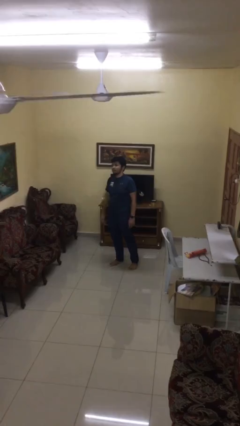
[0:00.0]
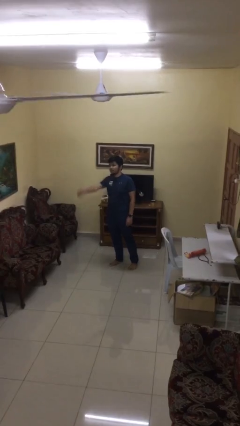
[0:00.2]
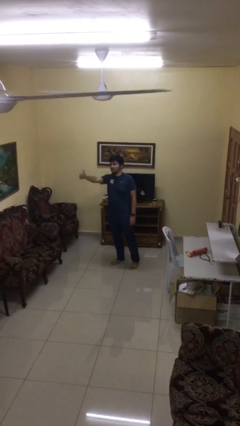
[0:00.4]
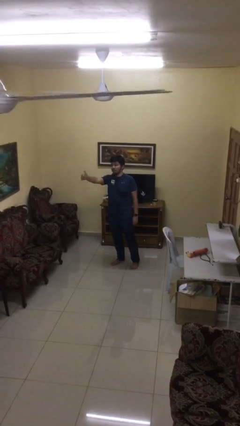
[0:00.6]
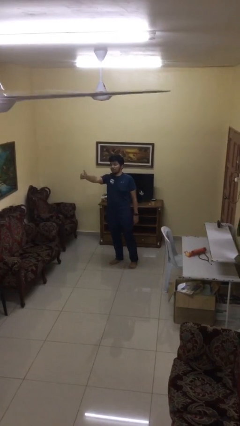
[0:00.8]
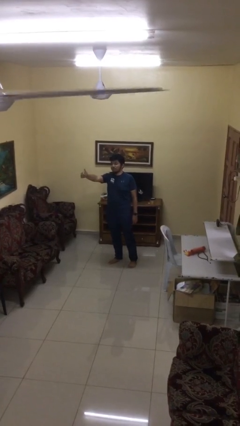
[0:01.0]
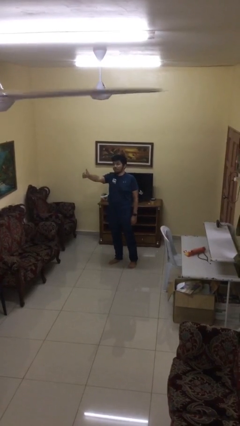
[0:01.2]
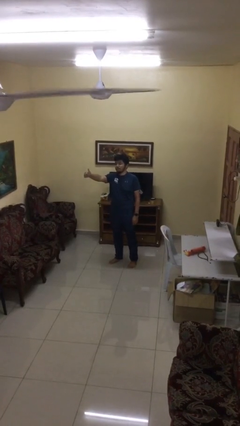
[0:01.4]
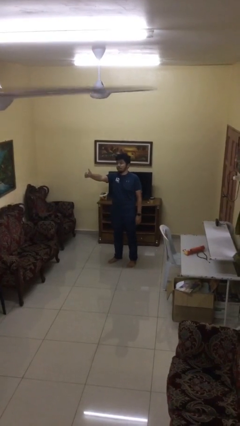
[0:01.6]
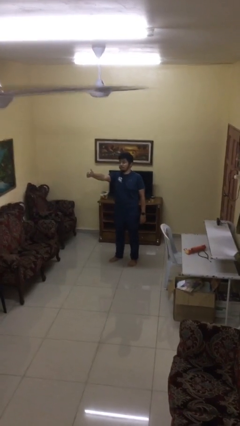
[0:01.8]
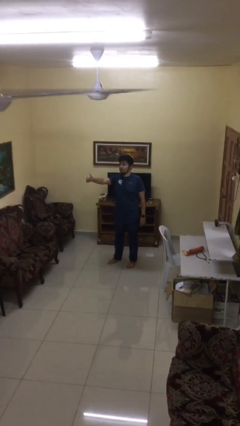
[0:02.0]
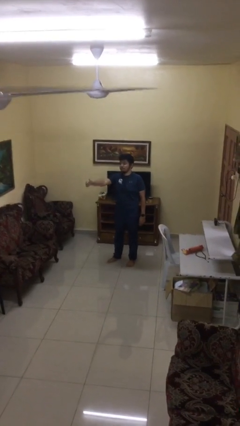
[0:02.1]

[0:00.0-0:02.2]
person gestures thumbs up

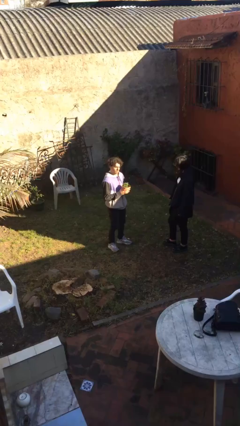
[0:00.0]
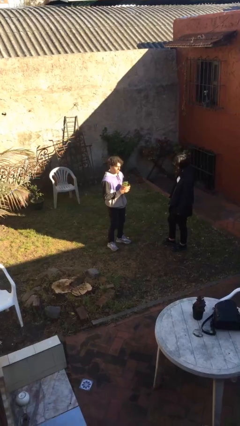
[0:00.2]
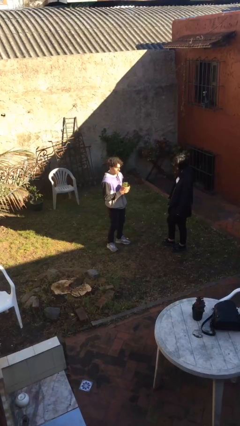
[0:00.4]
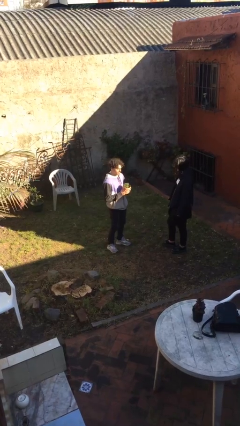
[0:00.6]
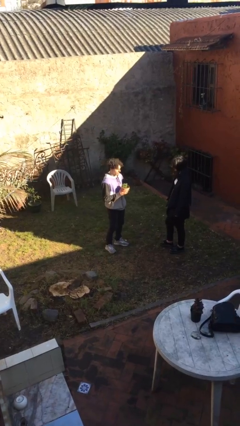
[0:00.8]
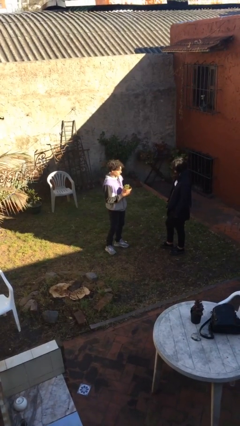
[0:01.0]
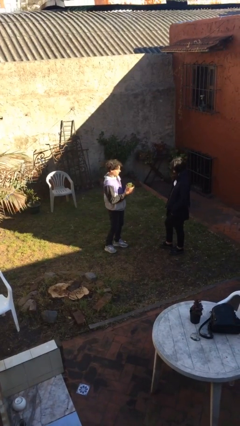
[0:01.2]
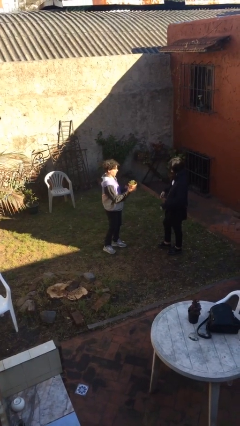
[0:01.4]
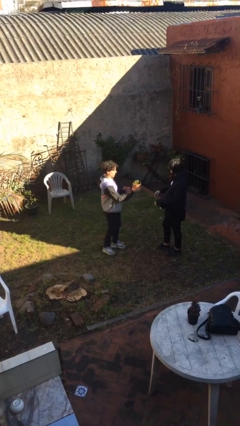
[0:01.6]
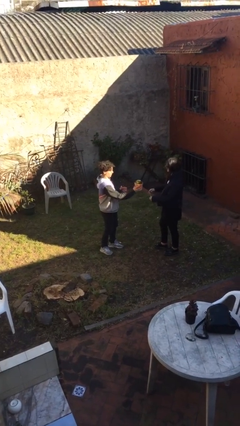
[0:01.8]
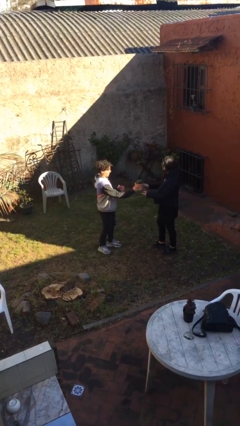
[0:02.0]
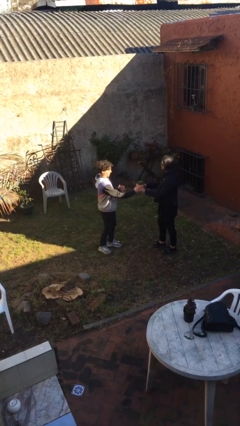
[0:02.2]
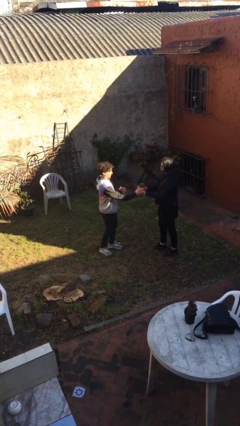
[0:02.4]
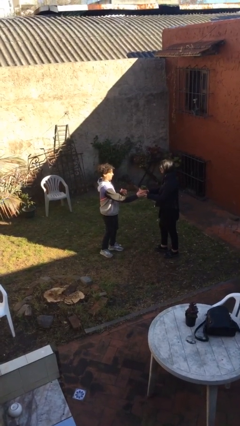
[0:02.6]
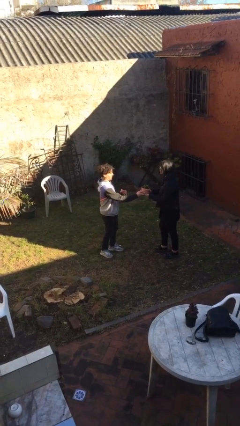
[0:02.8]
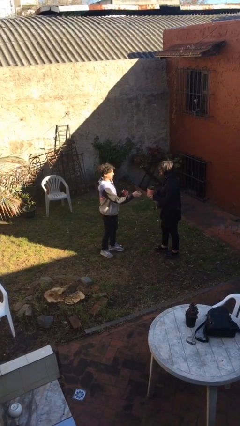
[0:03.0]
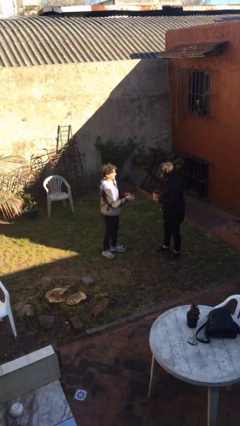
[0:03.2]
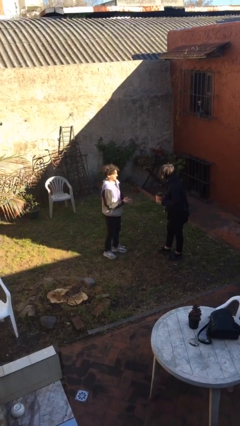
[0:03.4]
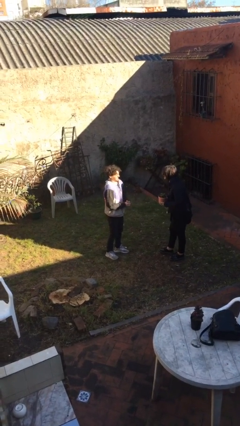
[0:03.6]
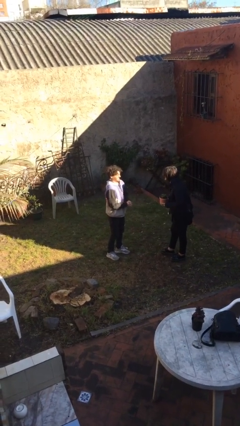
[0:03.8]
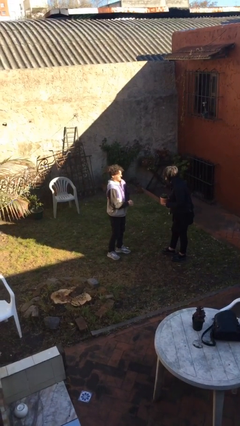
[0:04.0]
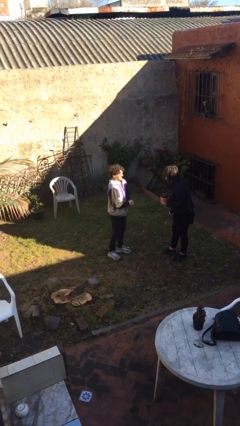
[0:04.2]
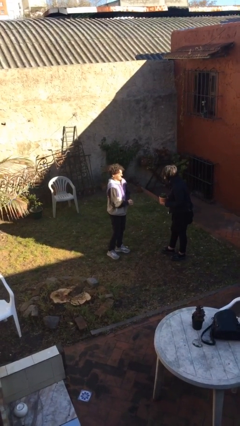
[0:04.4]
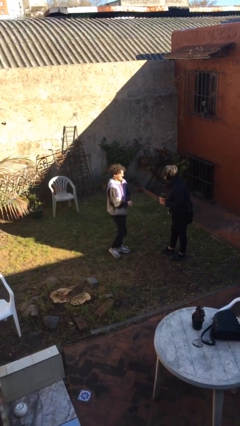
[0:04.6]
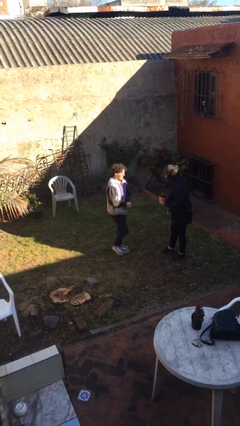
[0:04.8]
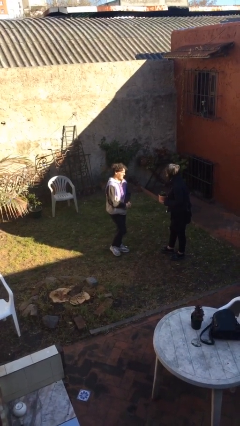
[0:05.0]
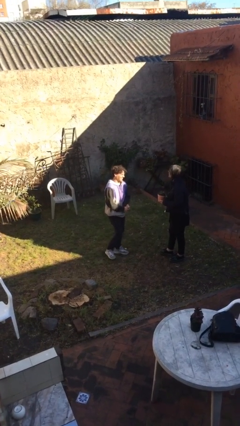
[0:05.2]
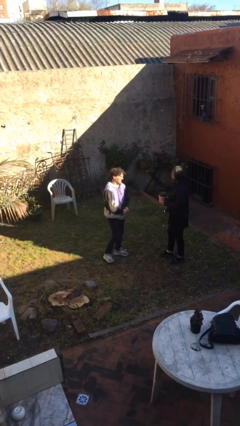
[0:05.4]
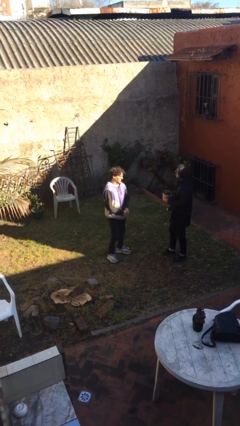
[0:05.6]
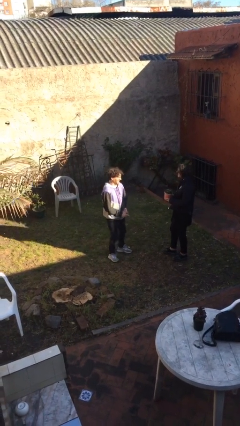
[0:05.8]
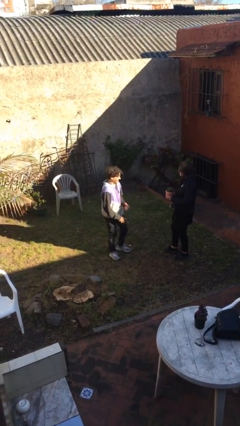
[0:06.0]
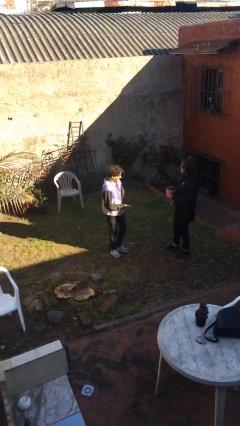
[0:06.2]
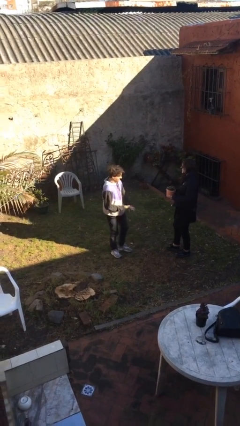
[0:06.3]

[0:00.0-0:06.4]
person transfers object to person

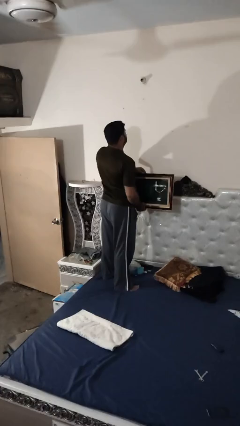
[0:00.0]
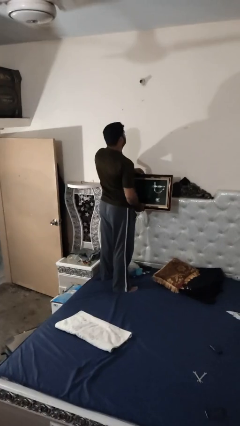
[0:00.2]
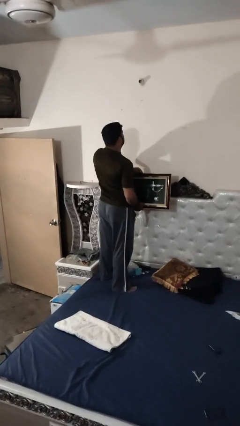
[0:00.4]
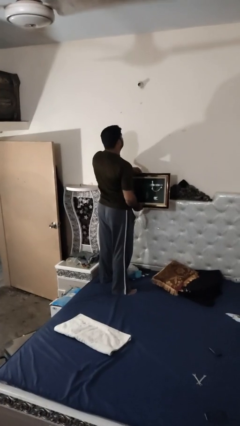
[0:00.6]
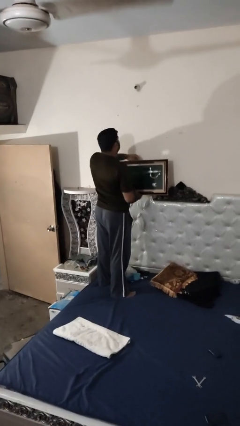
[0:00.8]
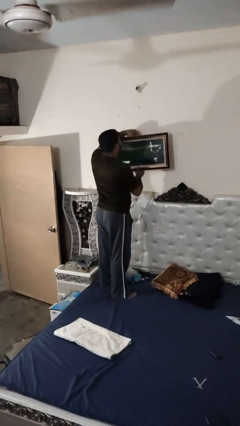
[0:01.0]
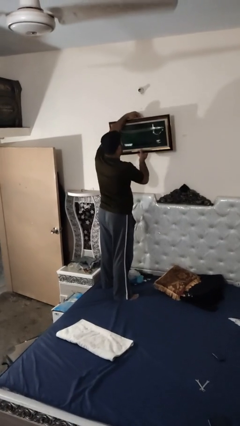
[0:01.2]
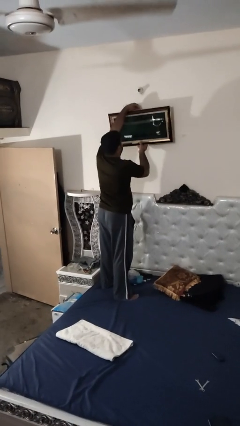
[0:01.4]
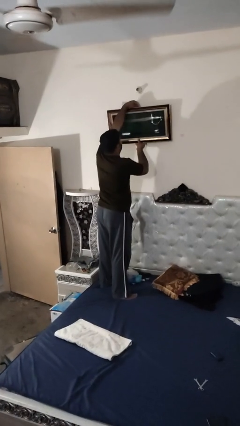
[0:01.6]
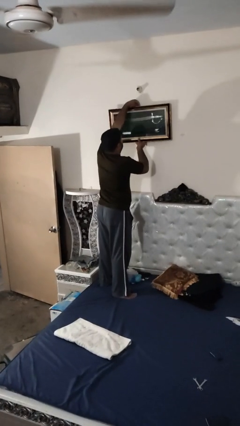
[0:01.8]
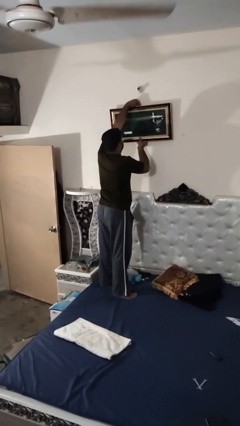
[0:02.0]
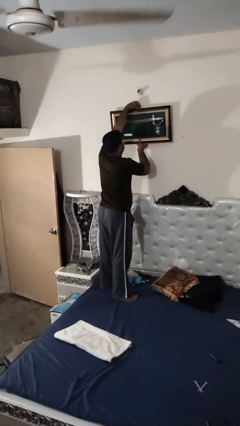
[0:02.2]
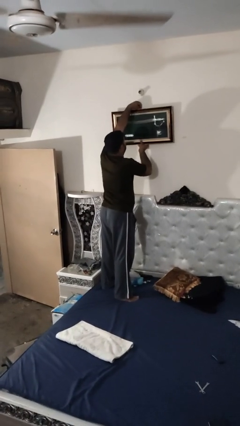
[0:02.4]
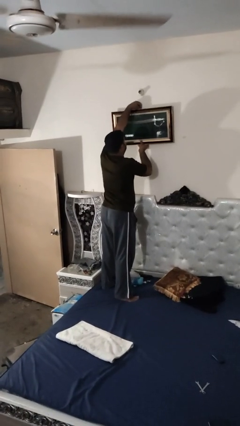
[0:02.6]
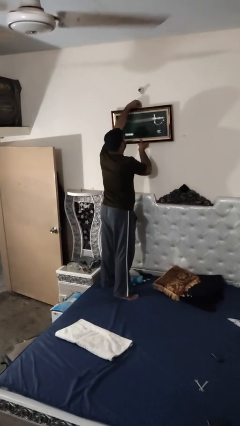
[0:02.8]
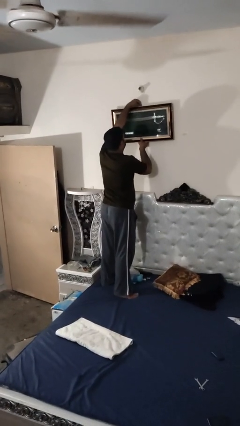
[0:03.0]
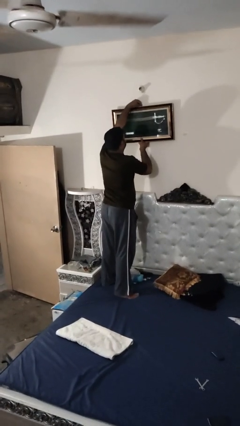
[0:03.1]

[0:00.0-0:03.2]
person puts up picture frame

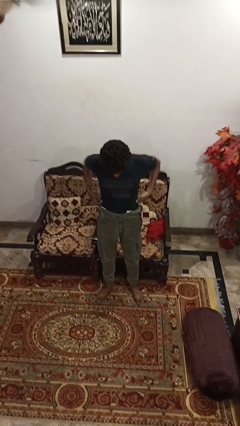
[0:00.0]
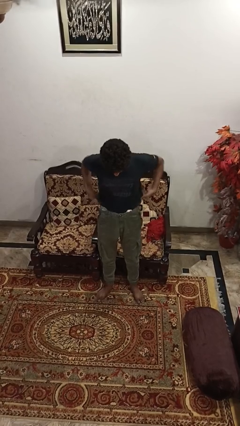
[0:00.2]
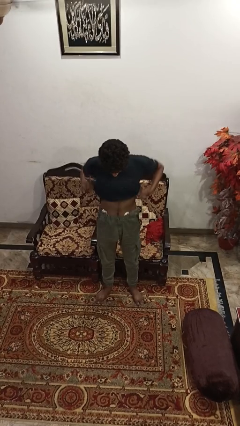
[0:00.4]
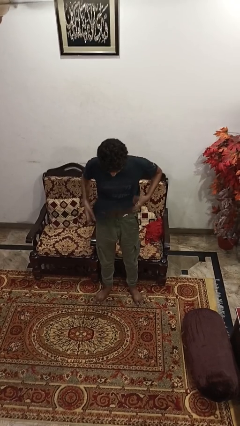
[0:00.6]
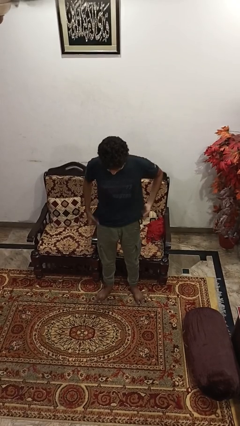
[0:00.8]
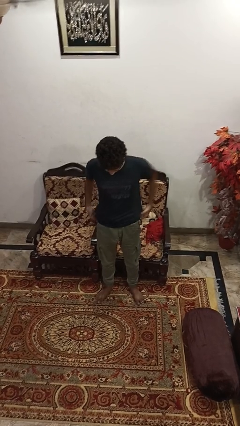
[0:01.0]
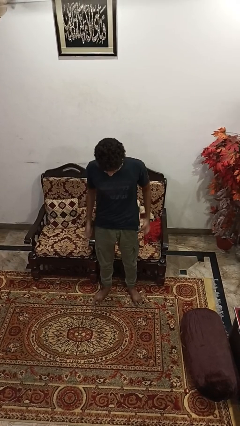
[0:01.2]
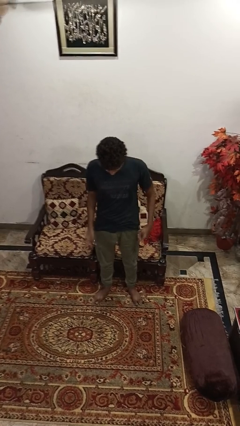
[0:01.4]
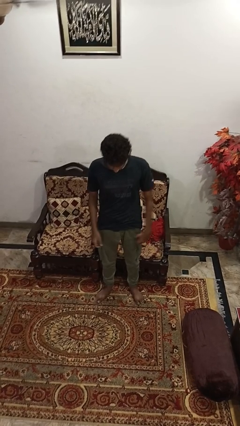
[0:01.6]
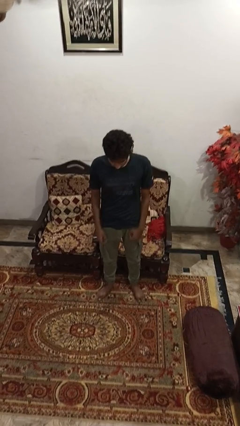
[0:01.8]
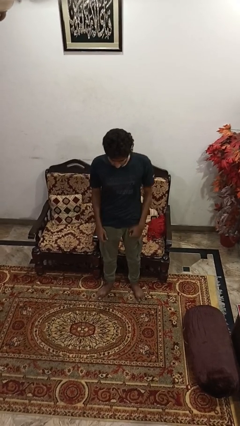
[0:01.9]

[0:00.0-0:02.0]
person untucks shirt

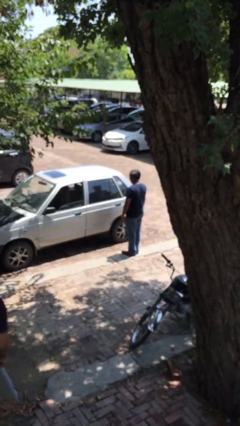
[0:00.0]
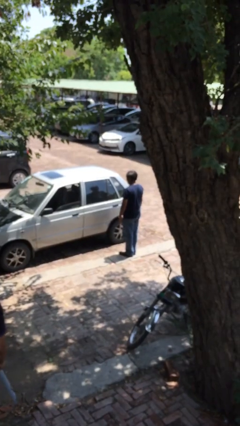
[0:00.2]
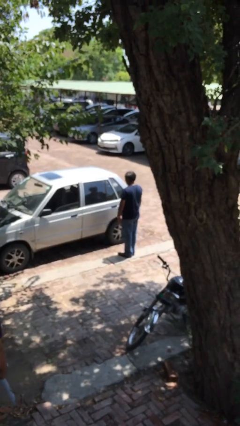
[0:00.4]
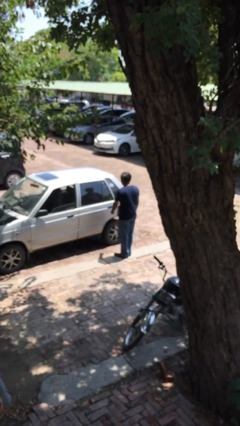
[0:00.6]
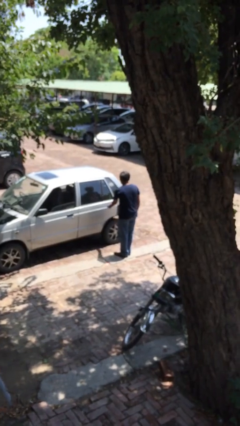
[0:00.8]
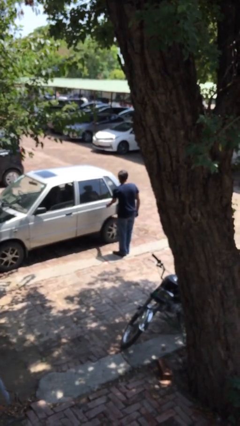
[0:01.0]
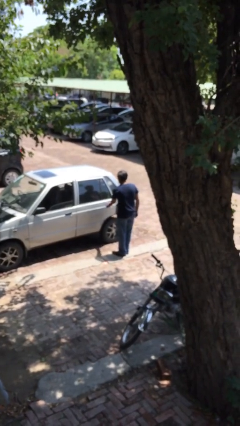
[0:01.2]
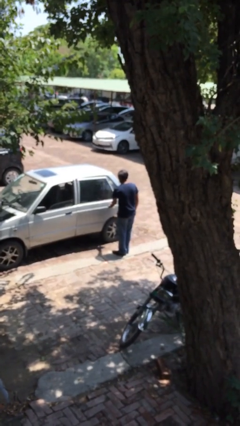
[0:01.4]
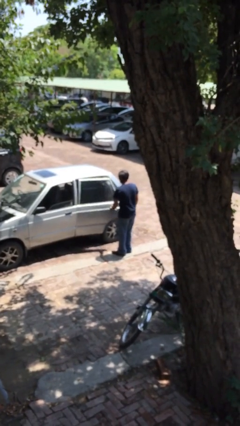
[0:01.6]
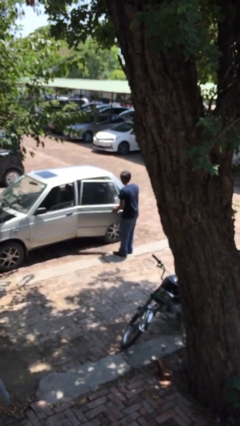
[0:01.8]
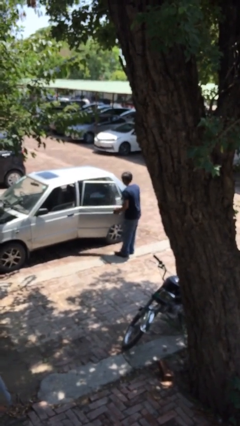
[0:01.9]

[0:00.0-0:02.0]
person opens car door

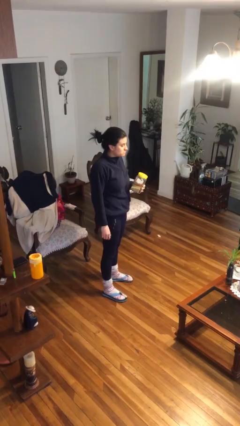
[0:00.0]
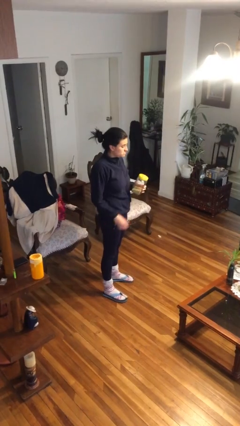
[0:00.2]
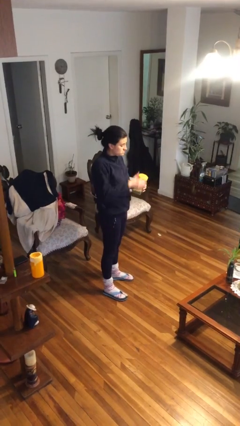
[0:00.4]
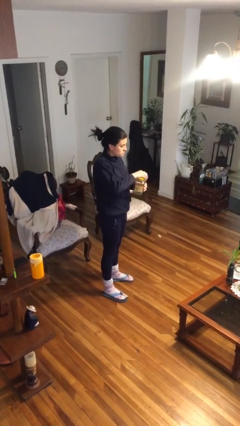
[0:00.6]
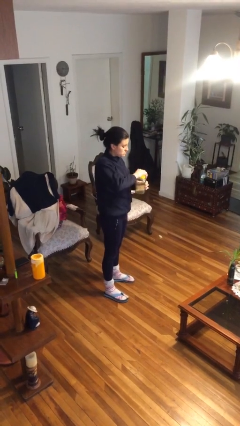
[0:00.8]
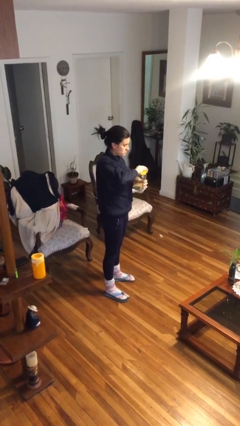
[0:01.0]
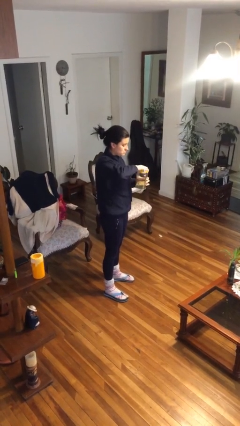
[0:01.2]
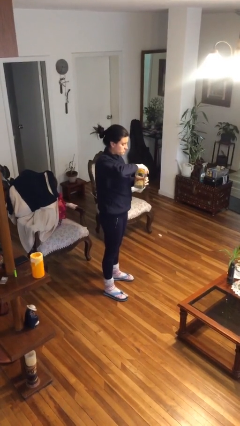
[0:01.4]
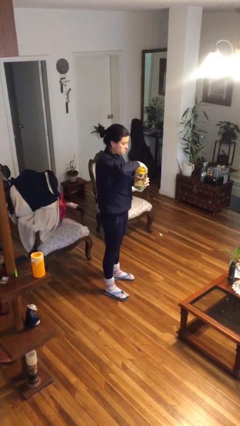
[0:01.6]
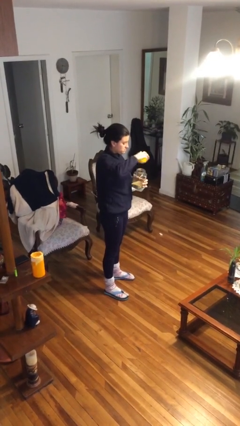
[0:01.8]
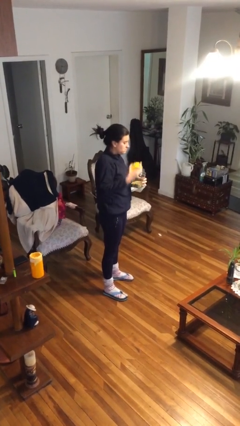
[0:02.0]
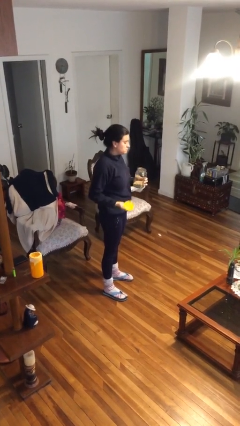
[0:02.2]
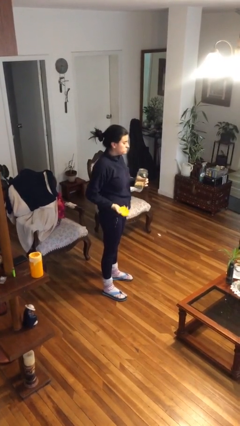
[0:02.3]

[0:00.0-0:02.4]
person opens jar
